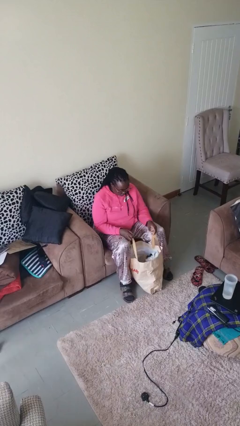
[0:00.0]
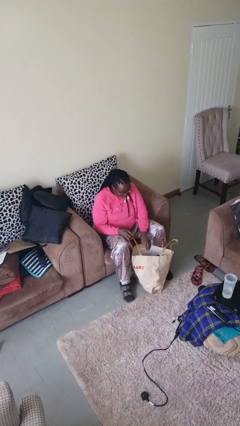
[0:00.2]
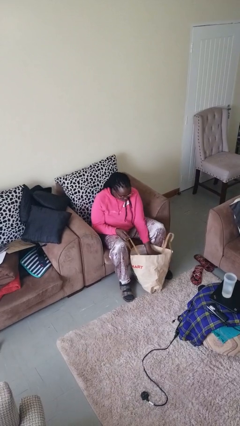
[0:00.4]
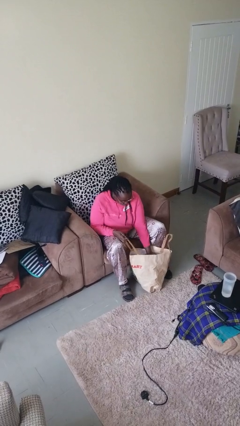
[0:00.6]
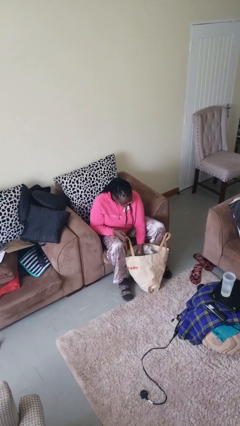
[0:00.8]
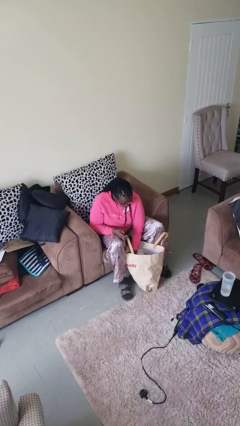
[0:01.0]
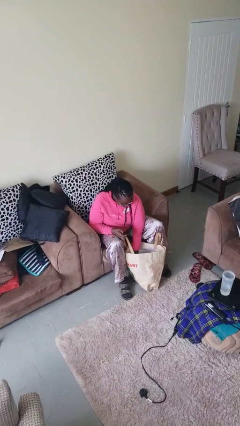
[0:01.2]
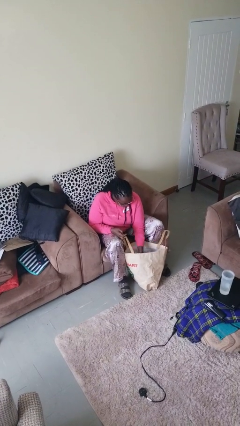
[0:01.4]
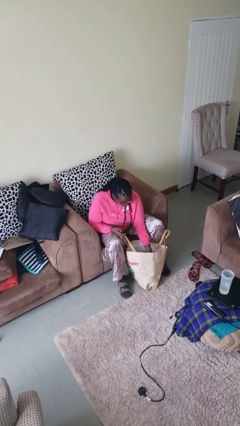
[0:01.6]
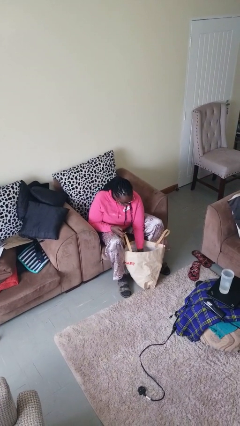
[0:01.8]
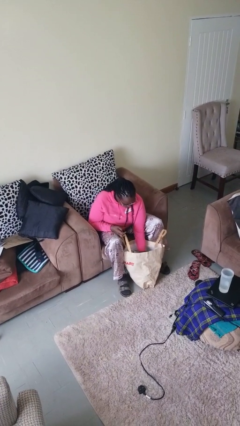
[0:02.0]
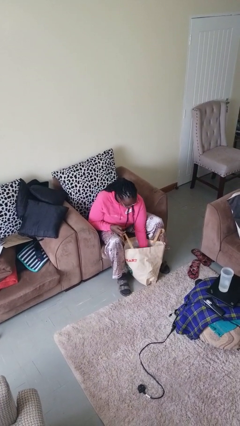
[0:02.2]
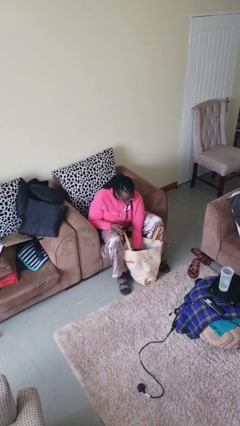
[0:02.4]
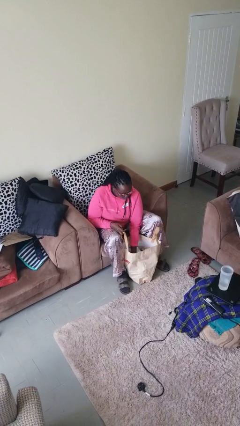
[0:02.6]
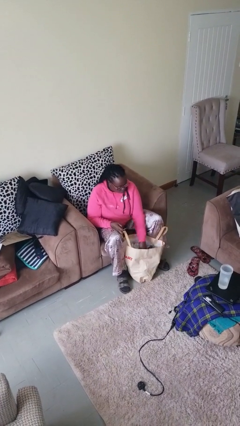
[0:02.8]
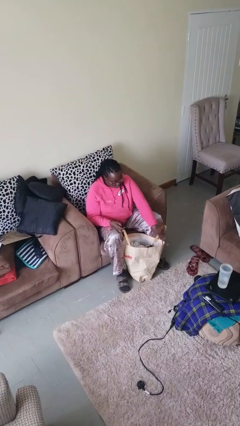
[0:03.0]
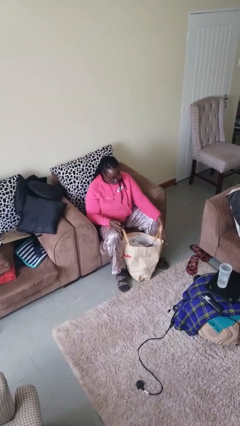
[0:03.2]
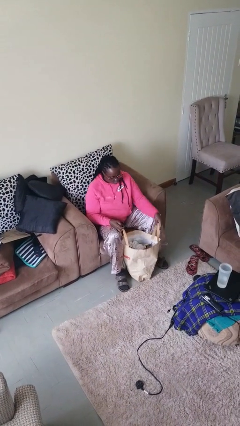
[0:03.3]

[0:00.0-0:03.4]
person searches in bag

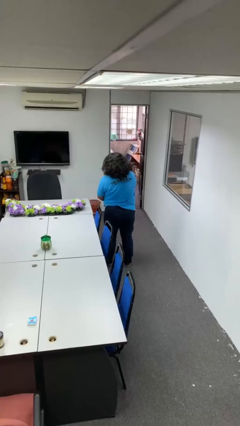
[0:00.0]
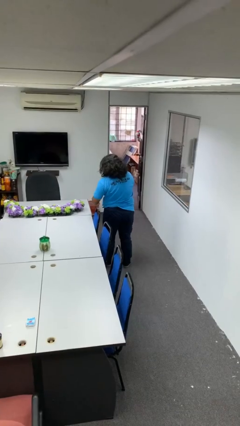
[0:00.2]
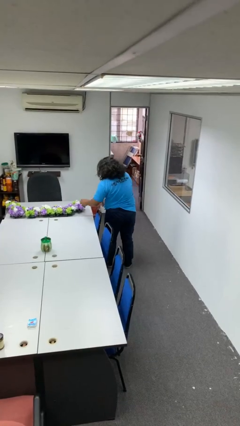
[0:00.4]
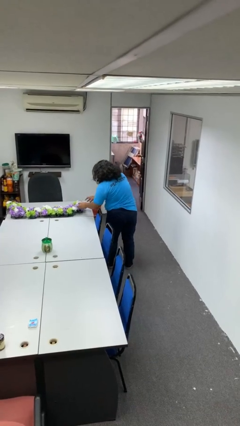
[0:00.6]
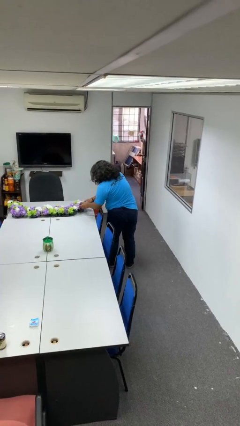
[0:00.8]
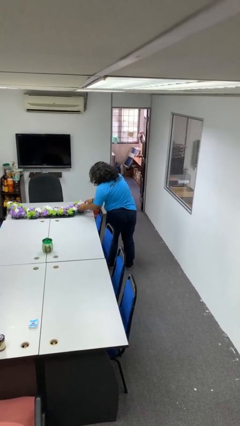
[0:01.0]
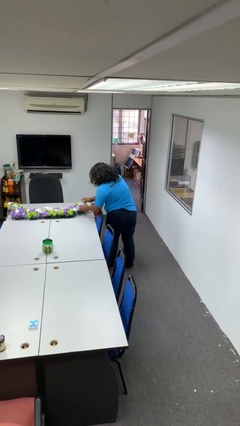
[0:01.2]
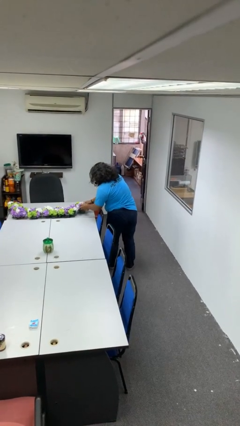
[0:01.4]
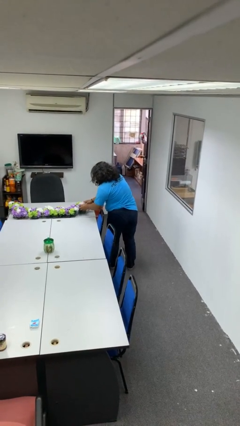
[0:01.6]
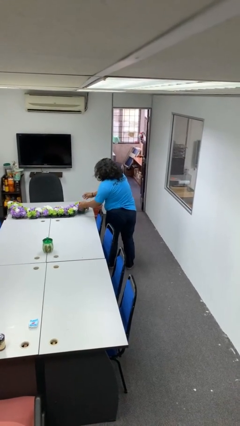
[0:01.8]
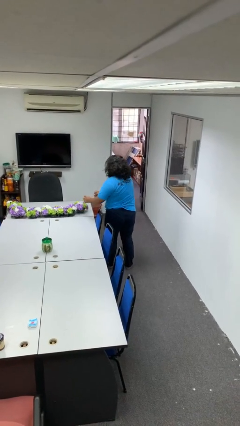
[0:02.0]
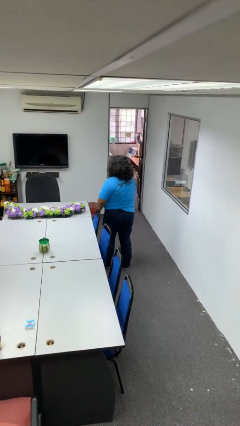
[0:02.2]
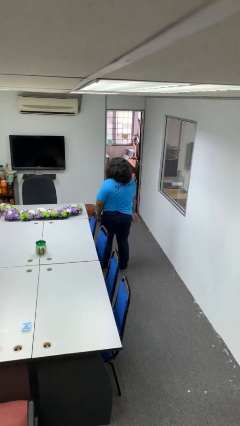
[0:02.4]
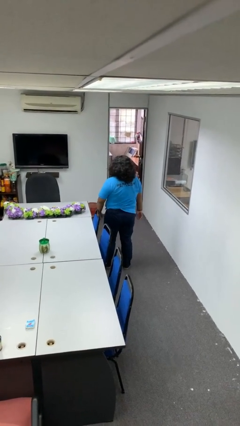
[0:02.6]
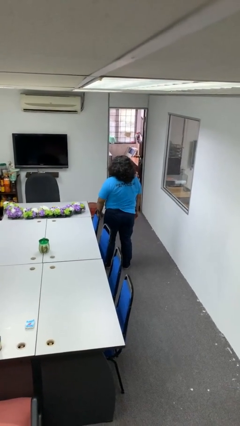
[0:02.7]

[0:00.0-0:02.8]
person arranges flowers in vase

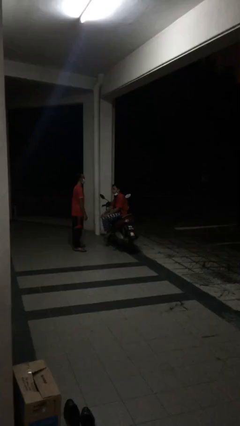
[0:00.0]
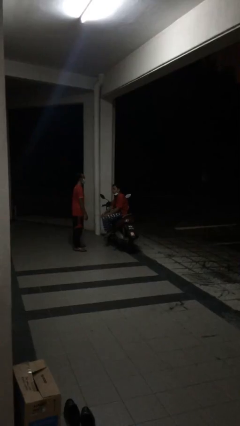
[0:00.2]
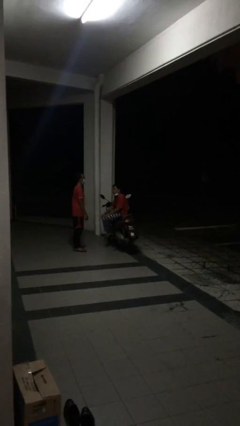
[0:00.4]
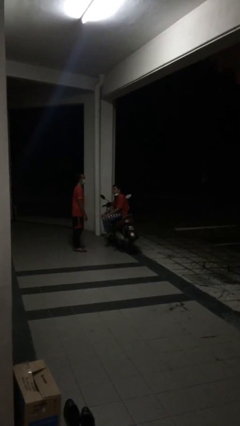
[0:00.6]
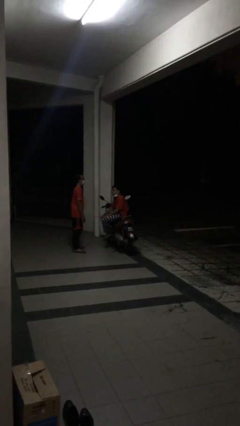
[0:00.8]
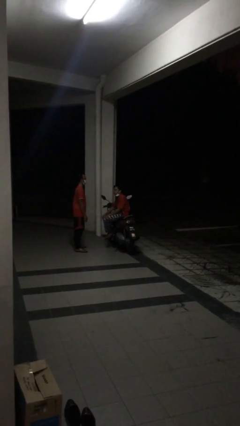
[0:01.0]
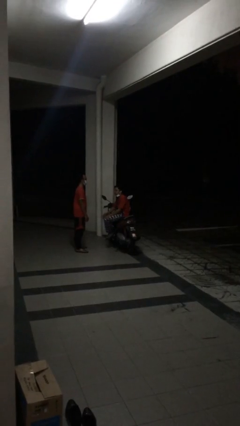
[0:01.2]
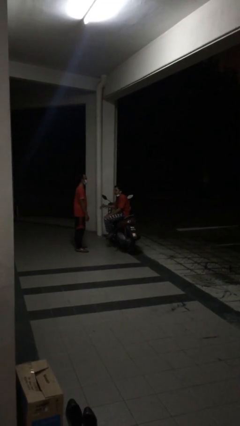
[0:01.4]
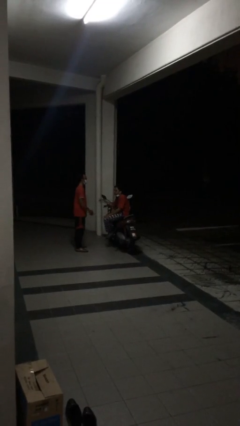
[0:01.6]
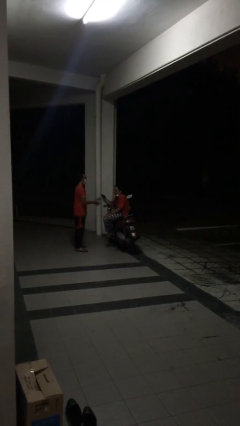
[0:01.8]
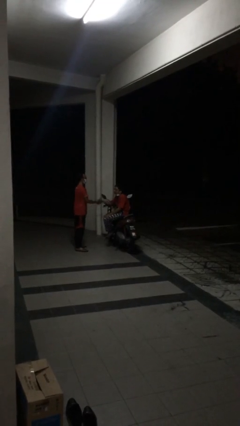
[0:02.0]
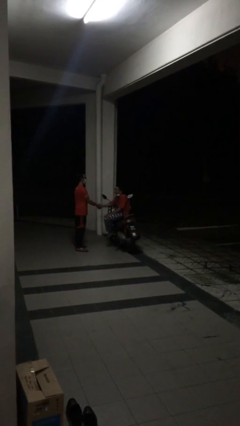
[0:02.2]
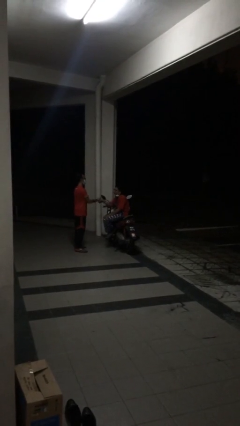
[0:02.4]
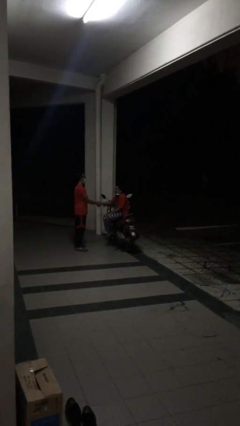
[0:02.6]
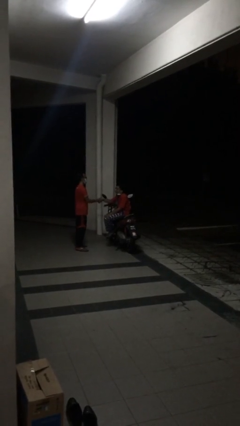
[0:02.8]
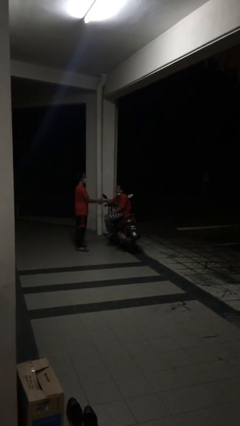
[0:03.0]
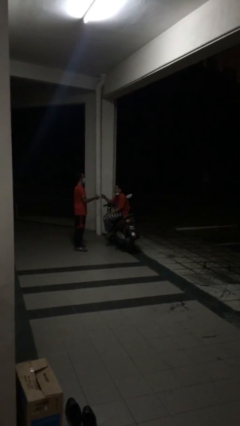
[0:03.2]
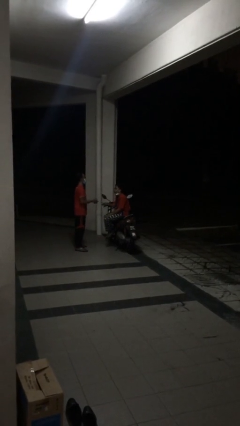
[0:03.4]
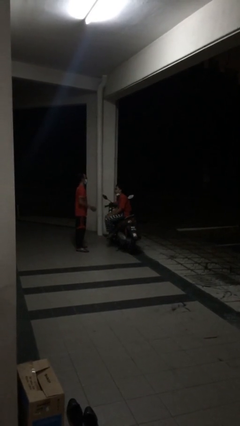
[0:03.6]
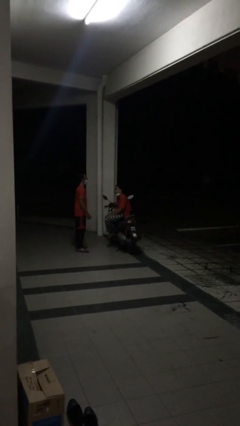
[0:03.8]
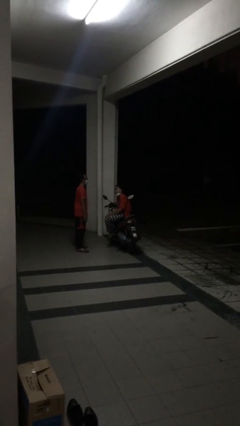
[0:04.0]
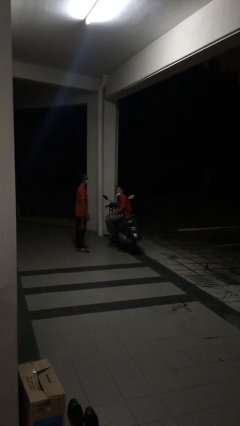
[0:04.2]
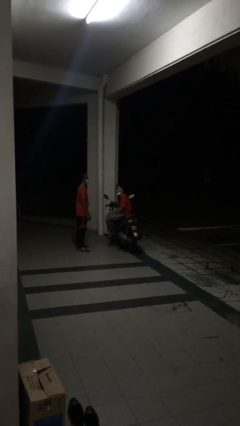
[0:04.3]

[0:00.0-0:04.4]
person shakes hand

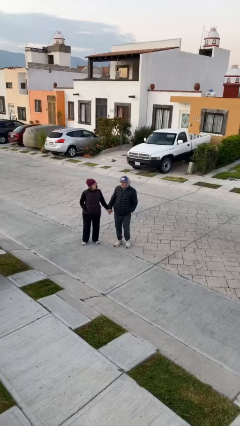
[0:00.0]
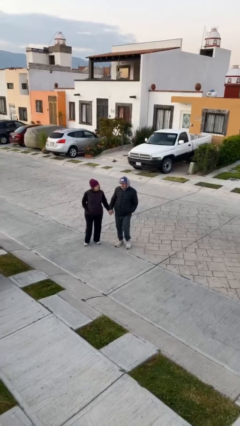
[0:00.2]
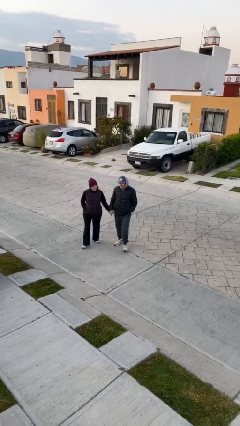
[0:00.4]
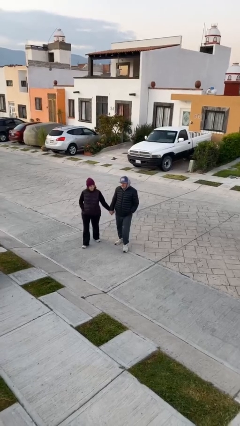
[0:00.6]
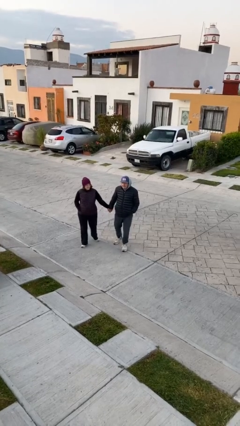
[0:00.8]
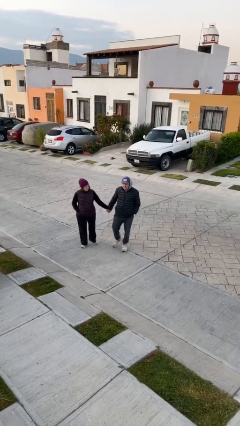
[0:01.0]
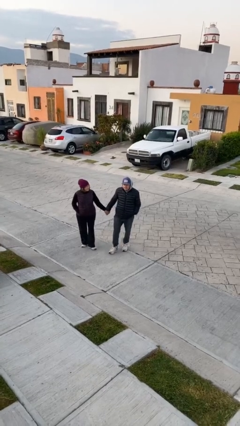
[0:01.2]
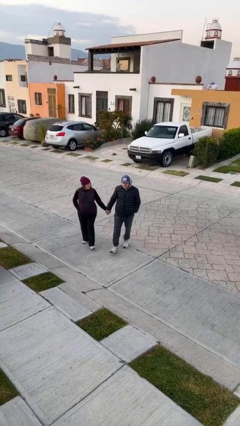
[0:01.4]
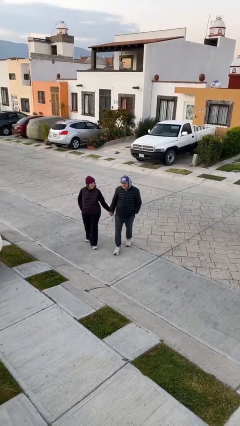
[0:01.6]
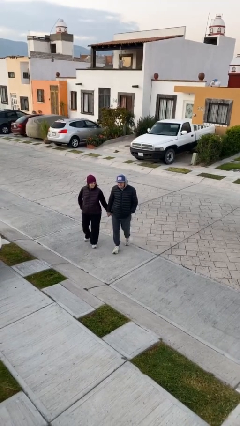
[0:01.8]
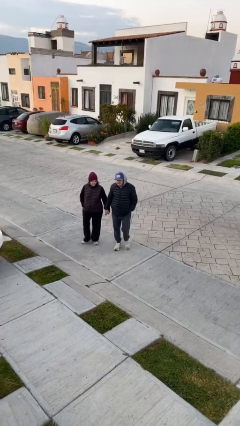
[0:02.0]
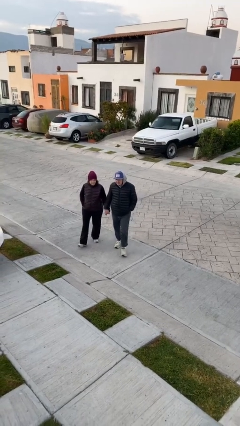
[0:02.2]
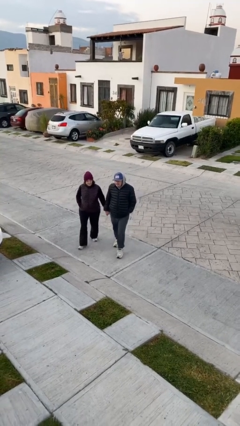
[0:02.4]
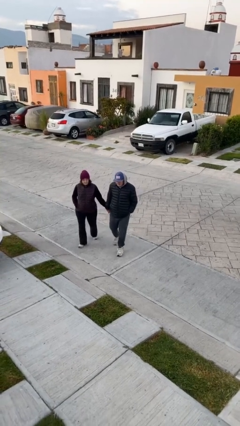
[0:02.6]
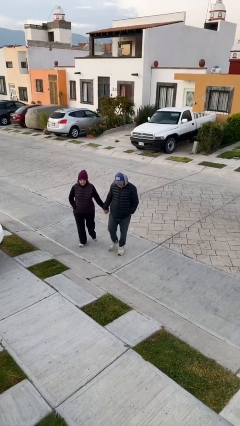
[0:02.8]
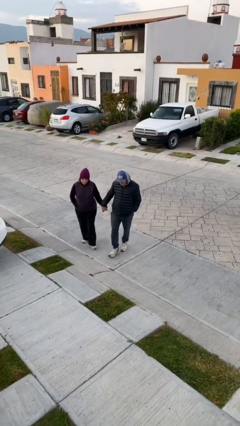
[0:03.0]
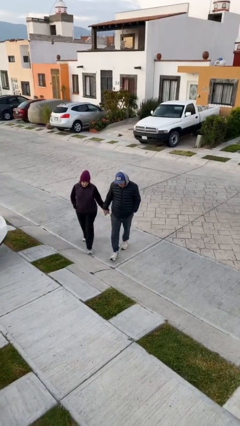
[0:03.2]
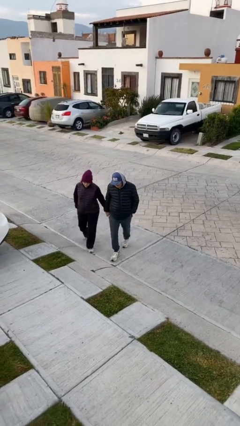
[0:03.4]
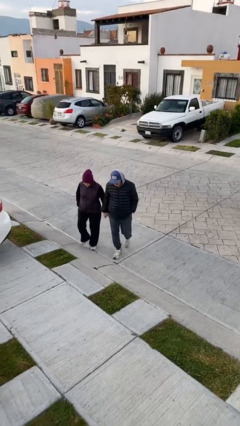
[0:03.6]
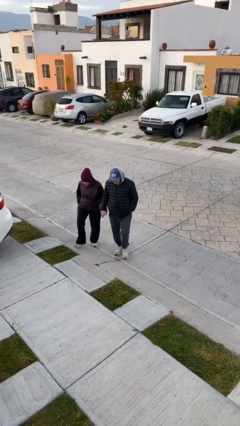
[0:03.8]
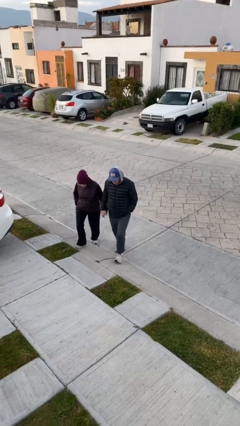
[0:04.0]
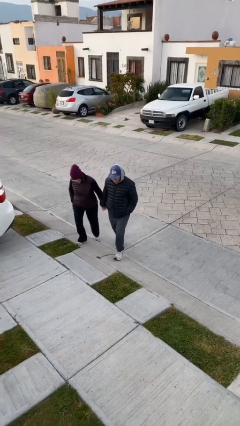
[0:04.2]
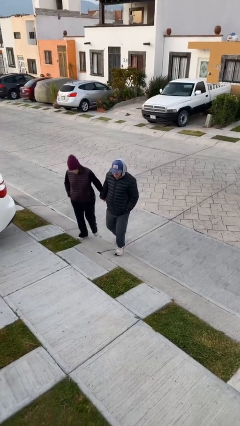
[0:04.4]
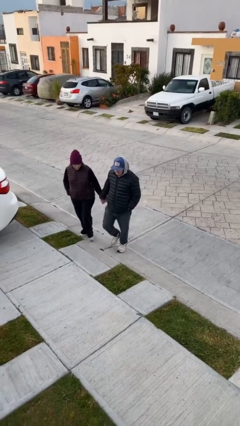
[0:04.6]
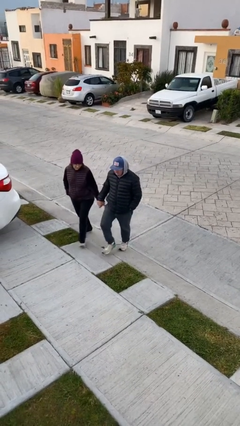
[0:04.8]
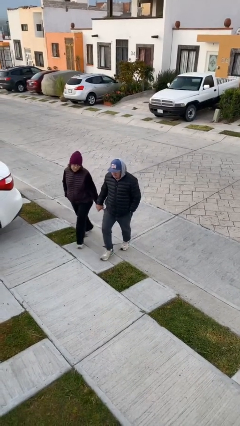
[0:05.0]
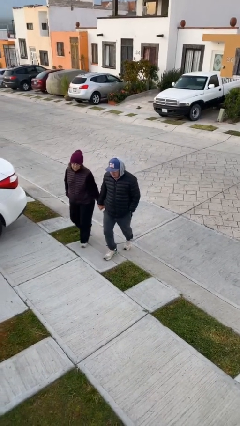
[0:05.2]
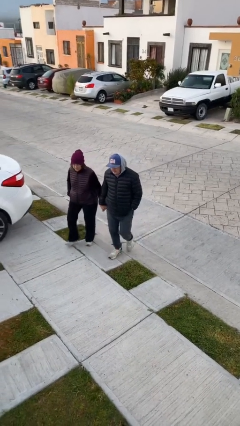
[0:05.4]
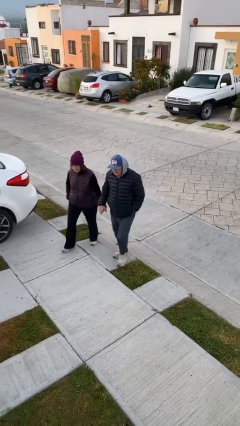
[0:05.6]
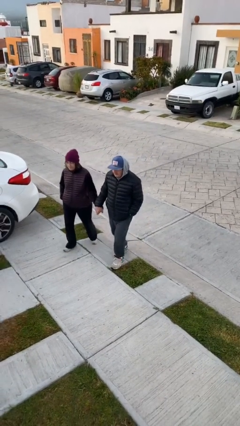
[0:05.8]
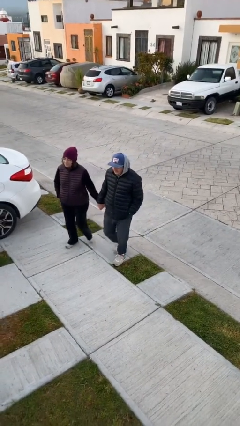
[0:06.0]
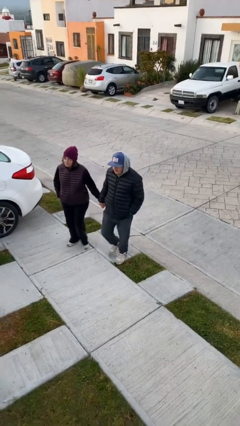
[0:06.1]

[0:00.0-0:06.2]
person holds hand

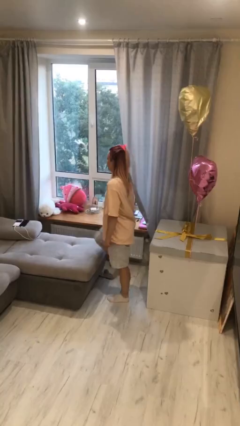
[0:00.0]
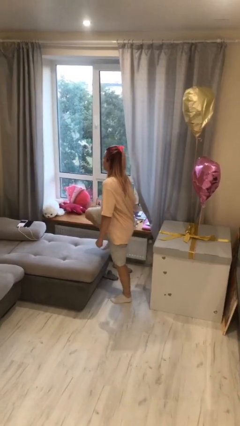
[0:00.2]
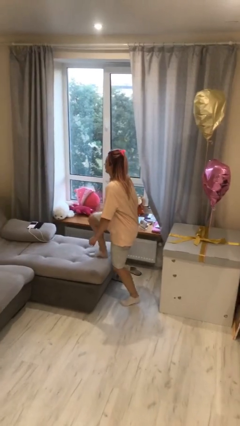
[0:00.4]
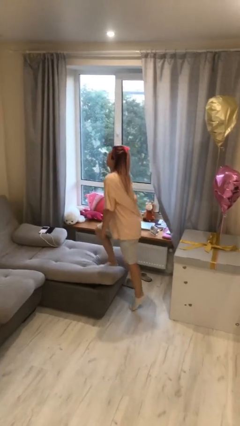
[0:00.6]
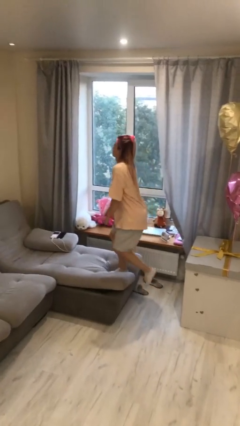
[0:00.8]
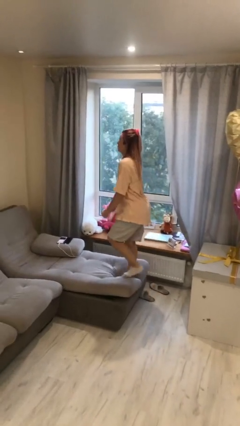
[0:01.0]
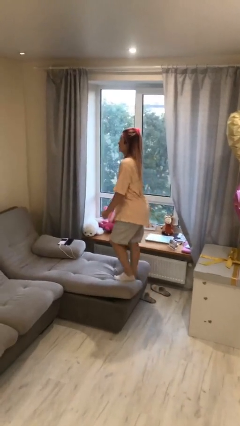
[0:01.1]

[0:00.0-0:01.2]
person climbs on couch
